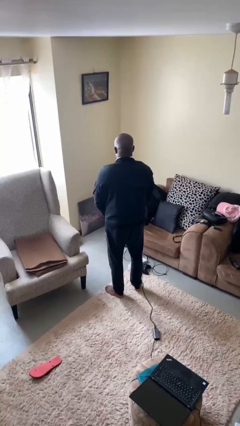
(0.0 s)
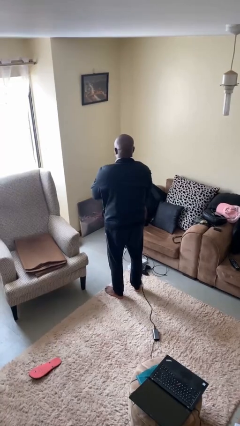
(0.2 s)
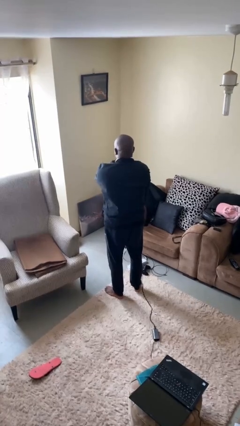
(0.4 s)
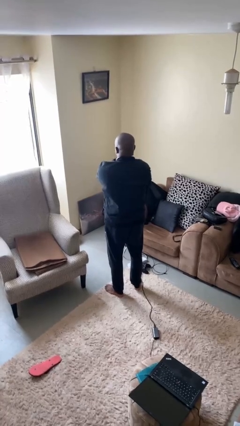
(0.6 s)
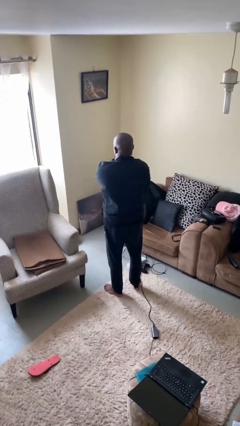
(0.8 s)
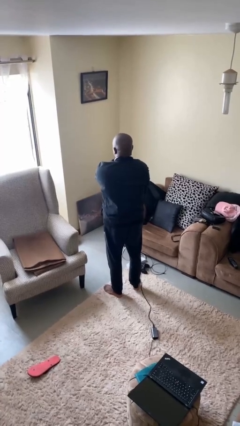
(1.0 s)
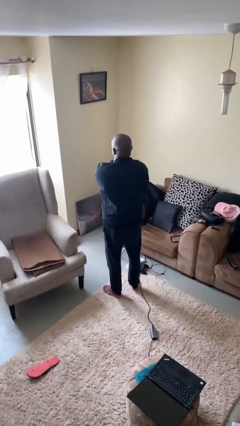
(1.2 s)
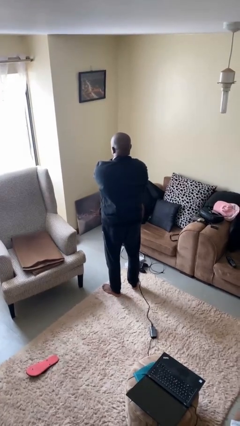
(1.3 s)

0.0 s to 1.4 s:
person zips up jacket

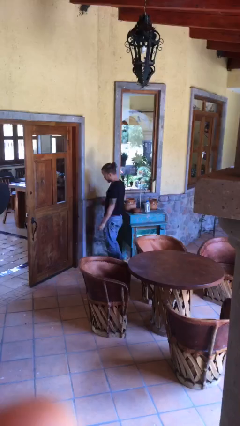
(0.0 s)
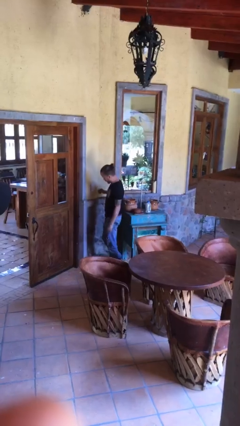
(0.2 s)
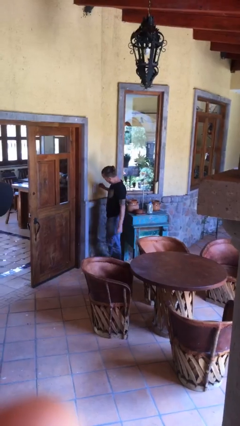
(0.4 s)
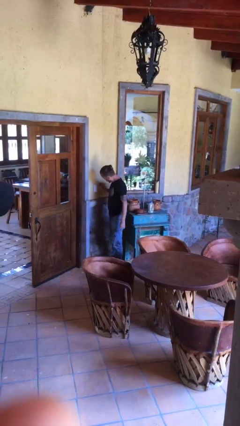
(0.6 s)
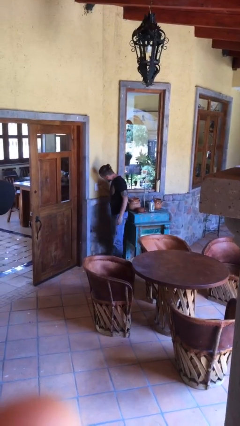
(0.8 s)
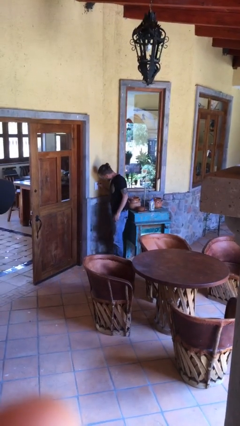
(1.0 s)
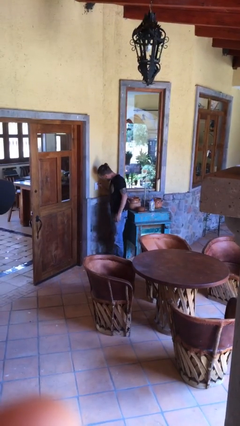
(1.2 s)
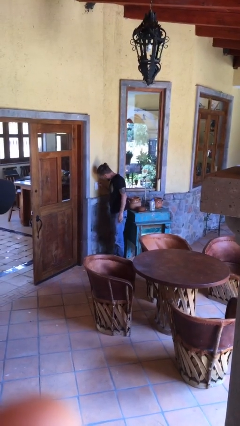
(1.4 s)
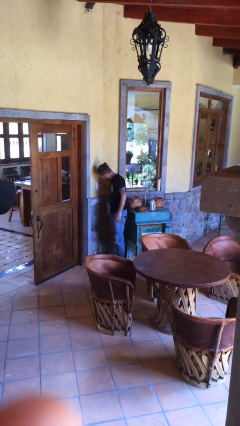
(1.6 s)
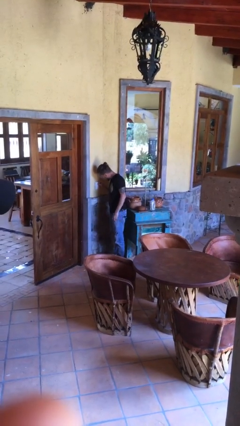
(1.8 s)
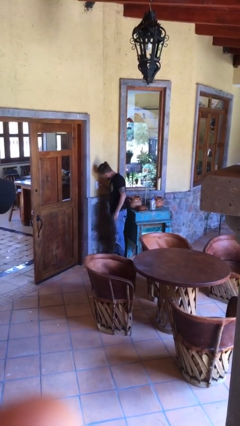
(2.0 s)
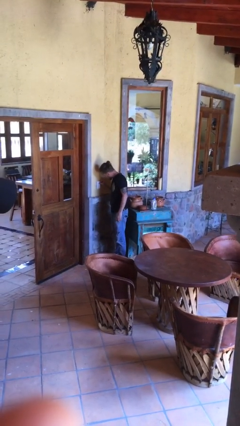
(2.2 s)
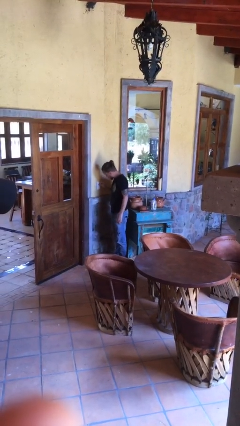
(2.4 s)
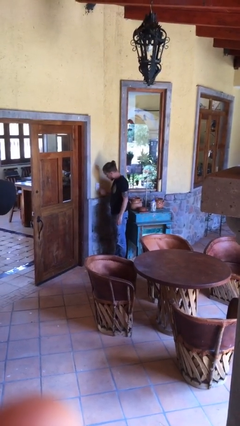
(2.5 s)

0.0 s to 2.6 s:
person adjusts thermostat

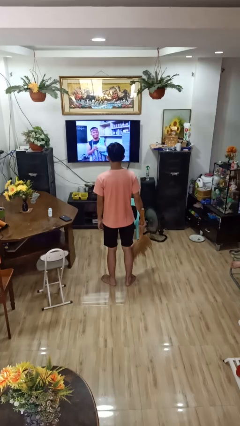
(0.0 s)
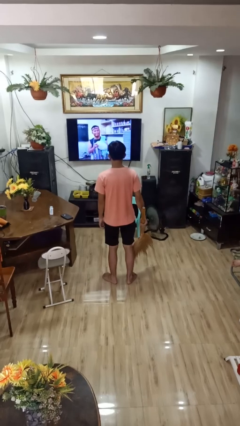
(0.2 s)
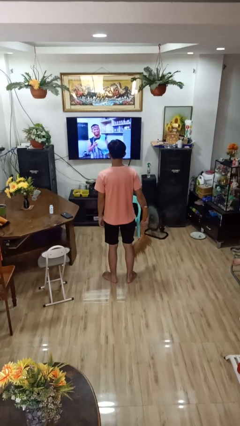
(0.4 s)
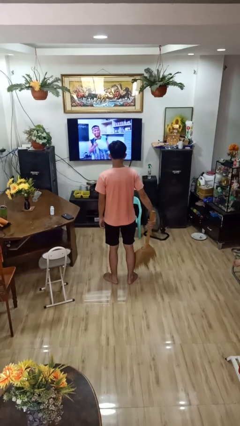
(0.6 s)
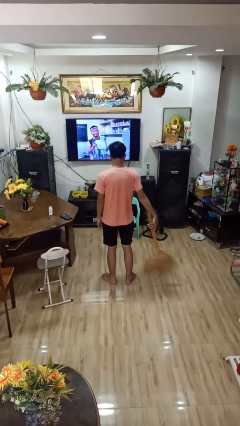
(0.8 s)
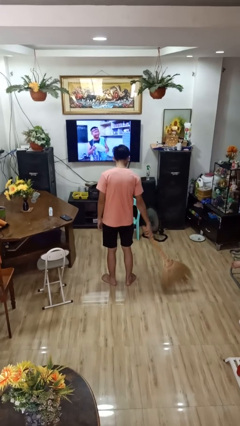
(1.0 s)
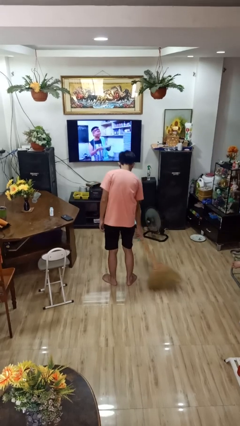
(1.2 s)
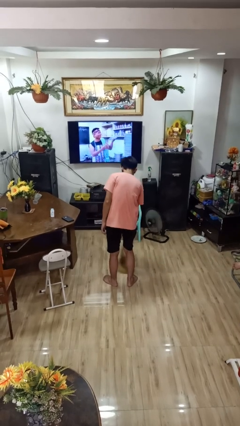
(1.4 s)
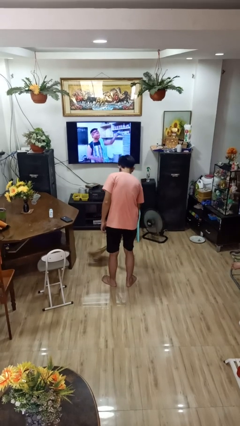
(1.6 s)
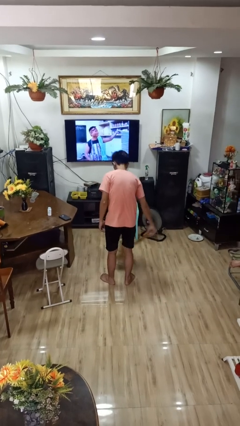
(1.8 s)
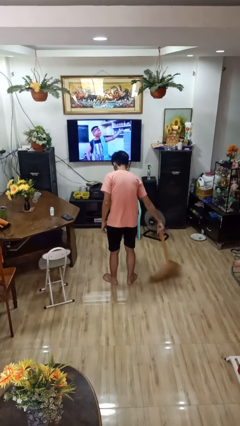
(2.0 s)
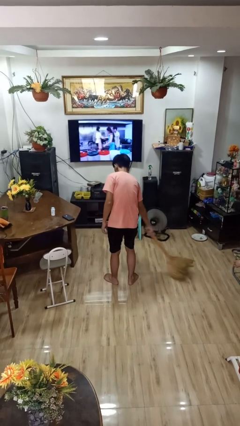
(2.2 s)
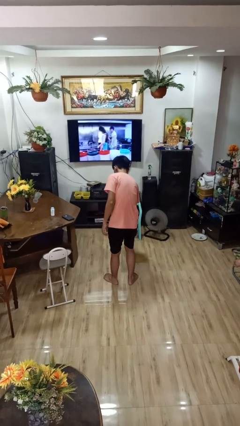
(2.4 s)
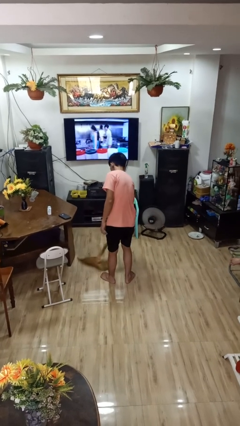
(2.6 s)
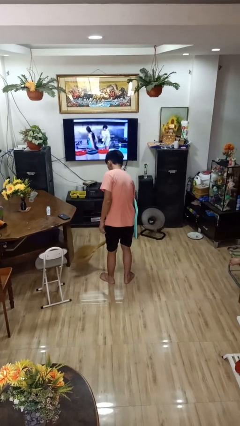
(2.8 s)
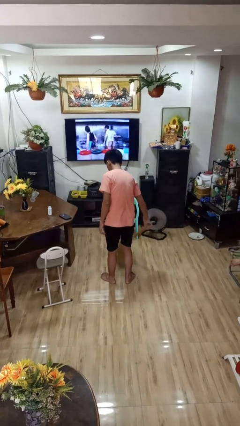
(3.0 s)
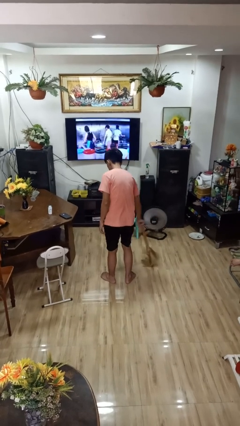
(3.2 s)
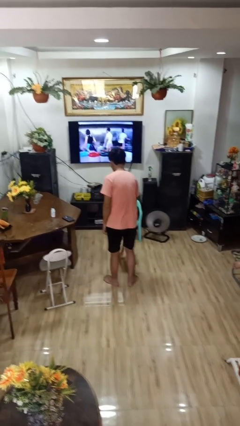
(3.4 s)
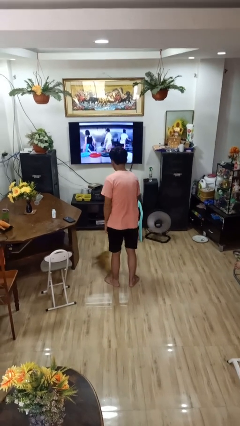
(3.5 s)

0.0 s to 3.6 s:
person sweeps floor

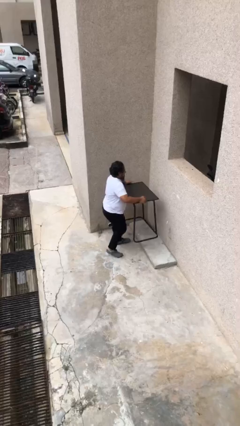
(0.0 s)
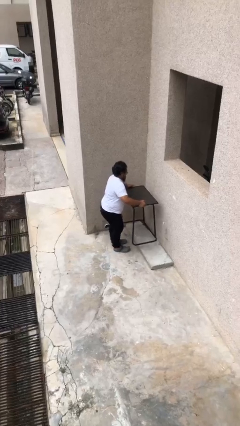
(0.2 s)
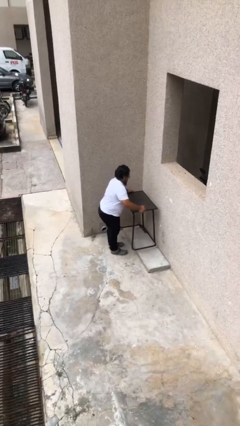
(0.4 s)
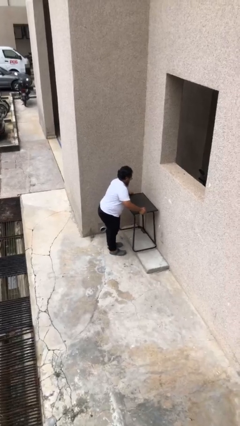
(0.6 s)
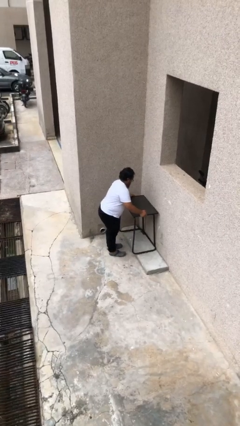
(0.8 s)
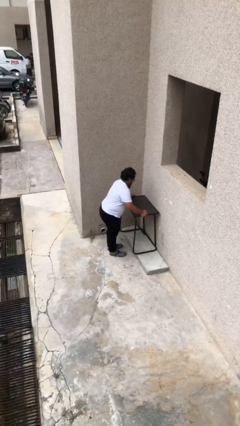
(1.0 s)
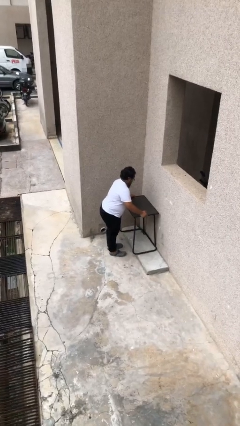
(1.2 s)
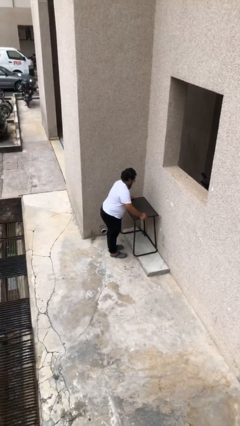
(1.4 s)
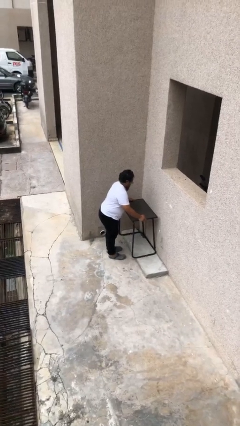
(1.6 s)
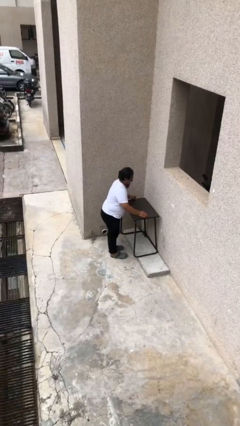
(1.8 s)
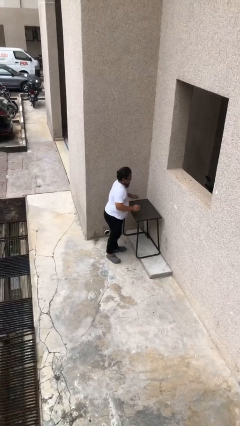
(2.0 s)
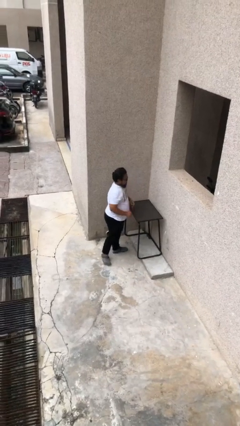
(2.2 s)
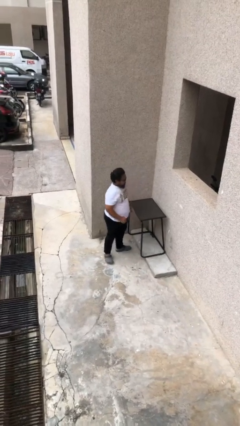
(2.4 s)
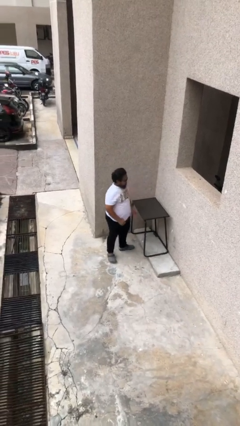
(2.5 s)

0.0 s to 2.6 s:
person puts down object on floor

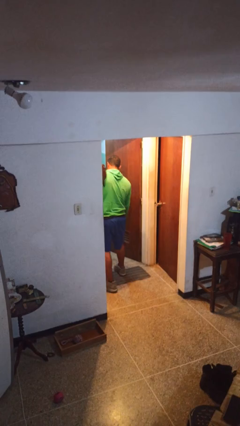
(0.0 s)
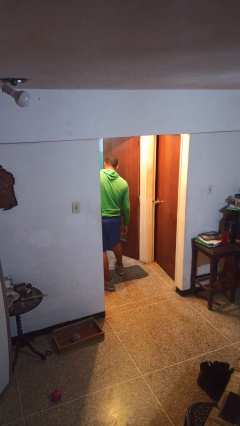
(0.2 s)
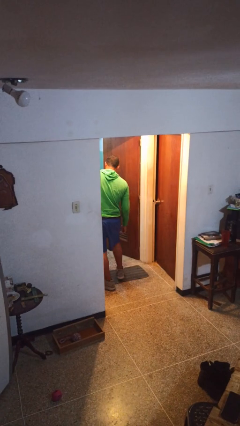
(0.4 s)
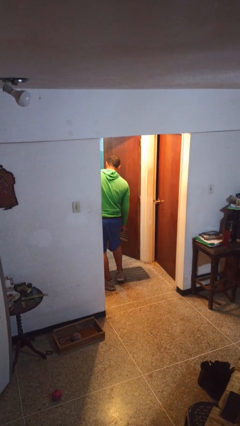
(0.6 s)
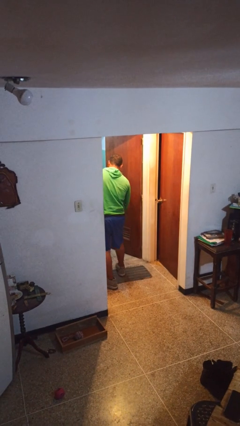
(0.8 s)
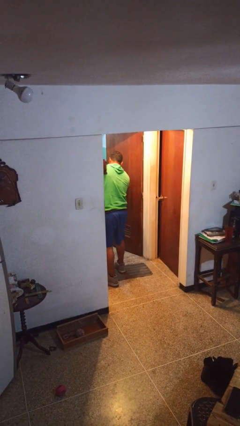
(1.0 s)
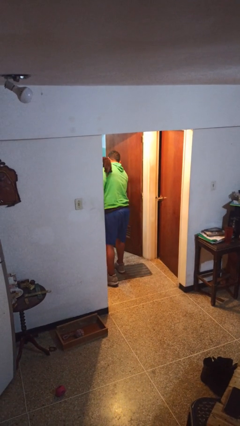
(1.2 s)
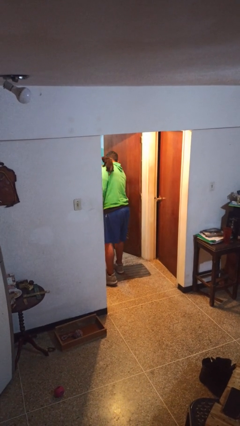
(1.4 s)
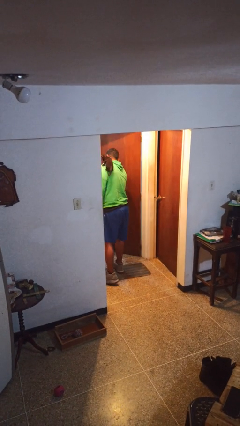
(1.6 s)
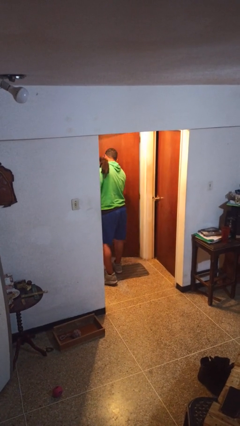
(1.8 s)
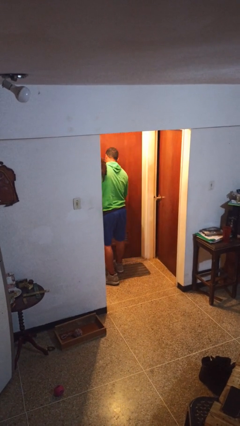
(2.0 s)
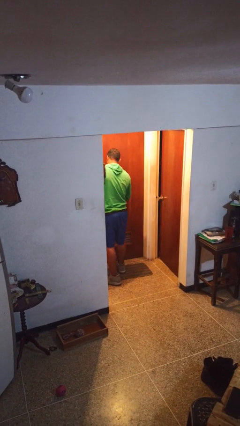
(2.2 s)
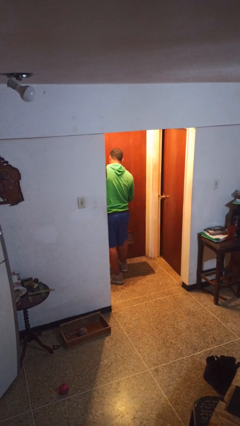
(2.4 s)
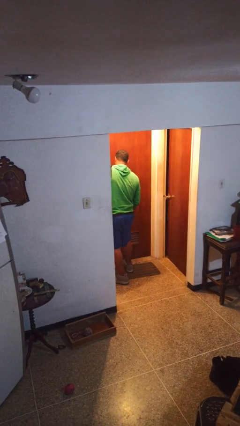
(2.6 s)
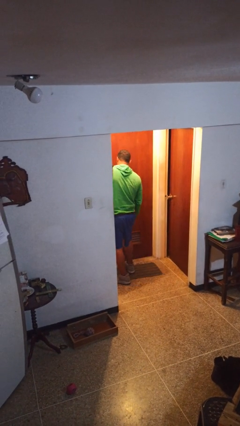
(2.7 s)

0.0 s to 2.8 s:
person closes facility door

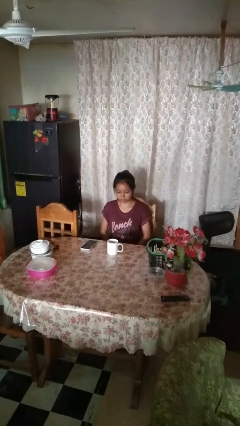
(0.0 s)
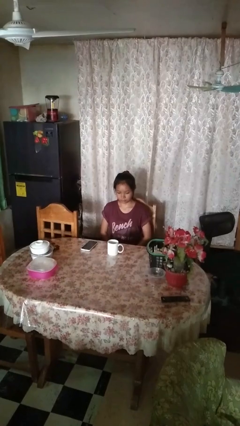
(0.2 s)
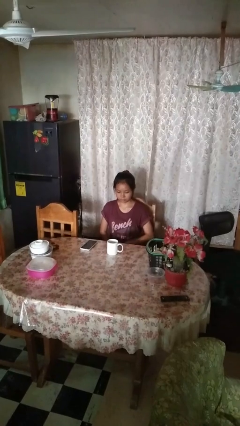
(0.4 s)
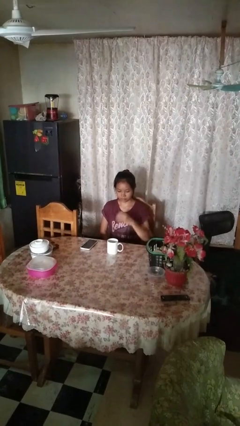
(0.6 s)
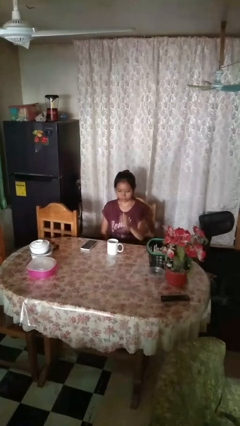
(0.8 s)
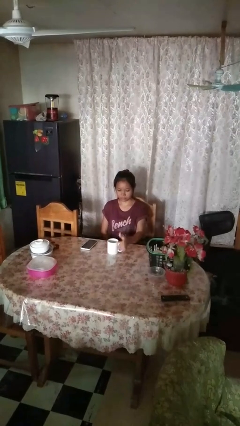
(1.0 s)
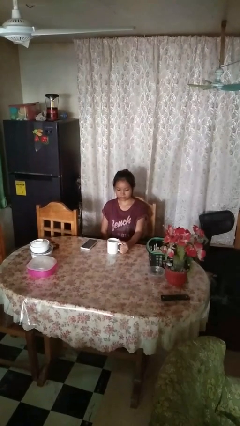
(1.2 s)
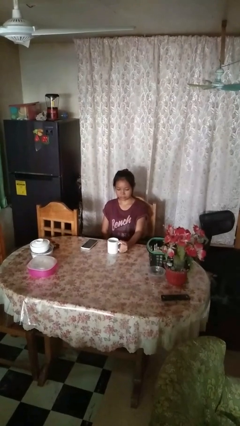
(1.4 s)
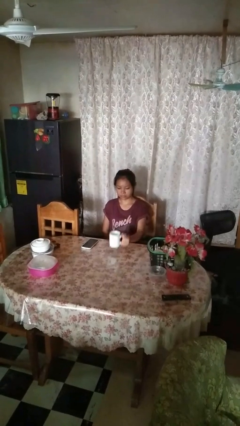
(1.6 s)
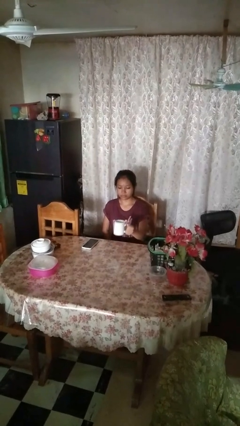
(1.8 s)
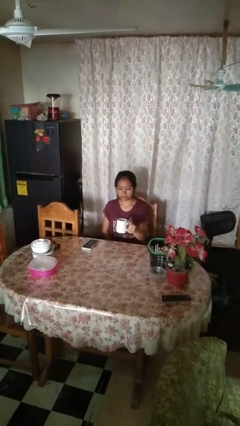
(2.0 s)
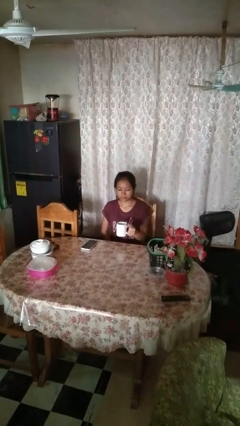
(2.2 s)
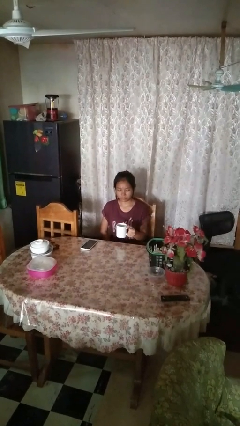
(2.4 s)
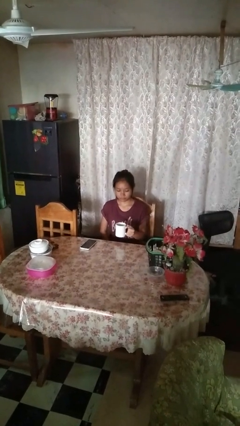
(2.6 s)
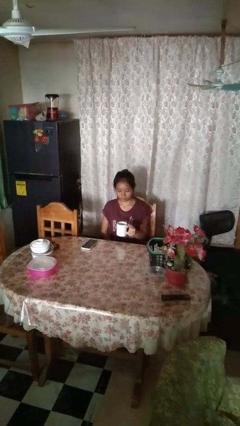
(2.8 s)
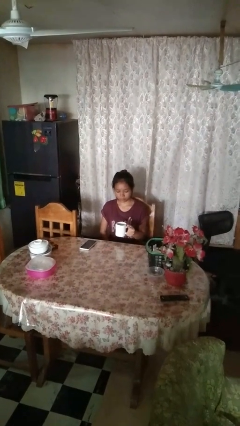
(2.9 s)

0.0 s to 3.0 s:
person picks up object from table

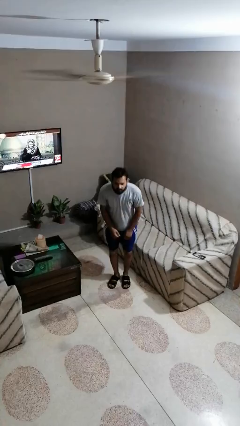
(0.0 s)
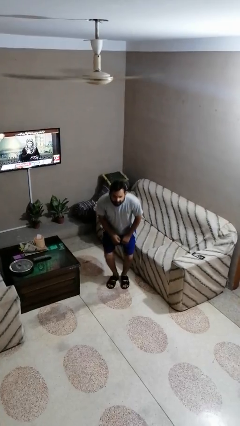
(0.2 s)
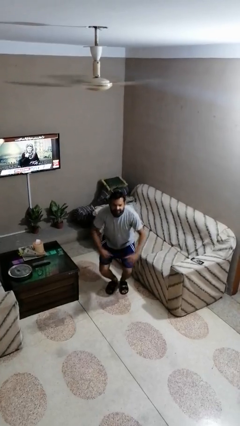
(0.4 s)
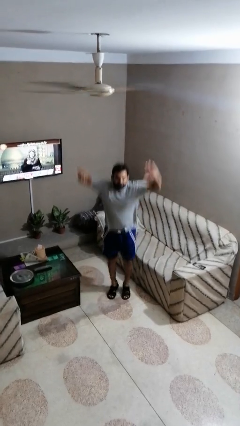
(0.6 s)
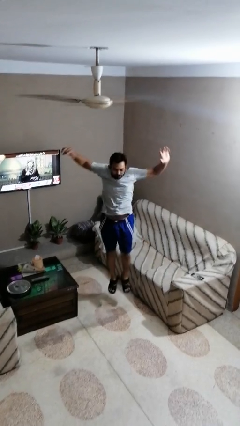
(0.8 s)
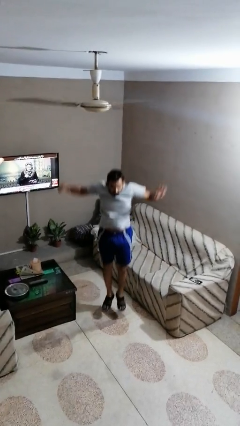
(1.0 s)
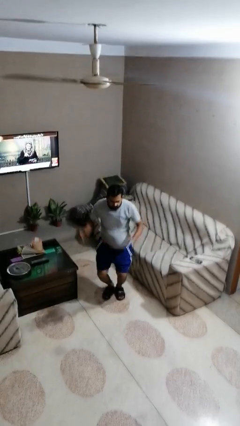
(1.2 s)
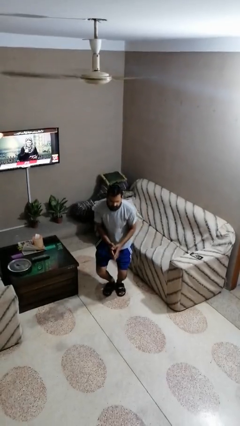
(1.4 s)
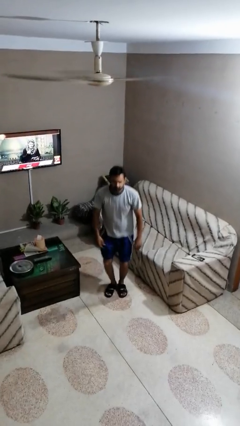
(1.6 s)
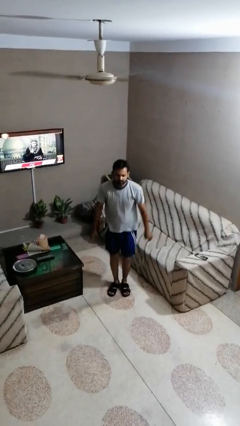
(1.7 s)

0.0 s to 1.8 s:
person jumps
